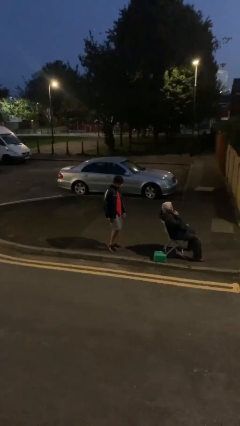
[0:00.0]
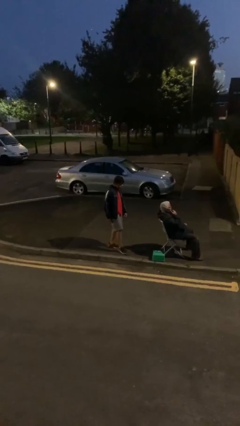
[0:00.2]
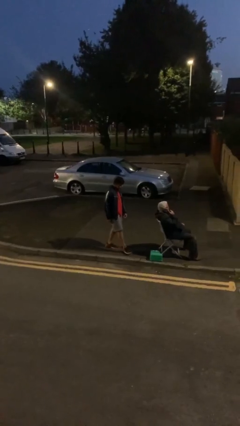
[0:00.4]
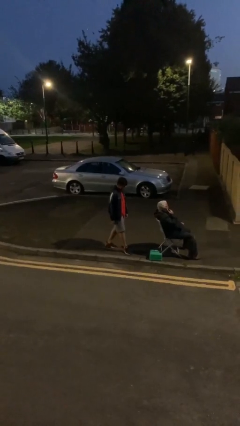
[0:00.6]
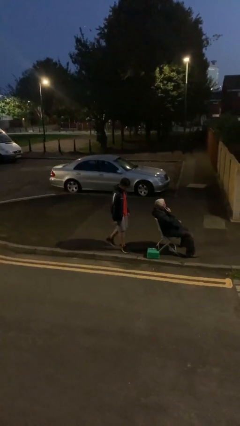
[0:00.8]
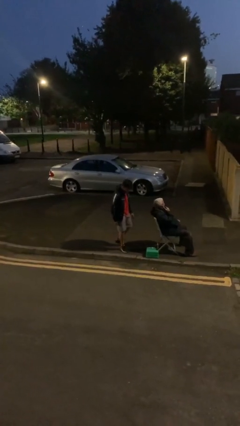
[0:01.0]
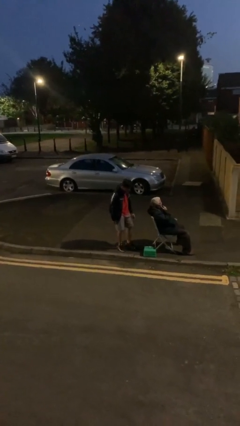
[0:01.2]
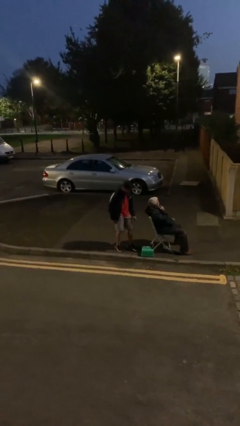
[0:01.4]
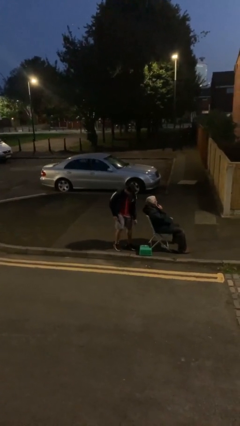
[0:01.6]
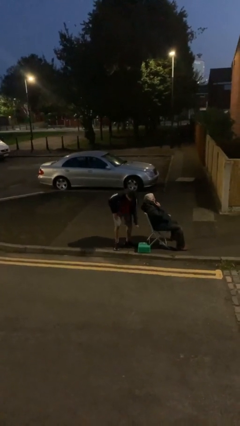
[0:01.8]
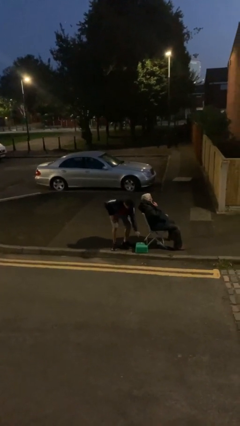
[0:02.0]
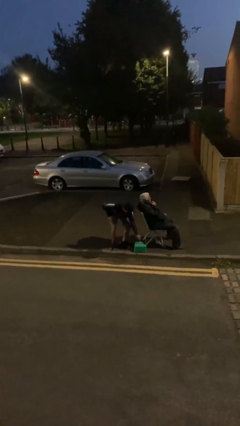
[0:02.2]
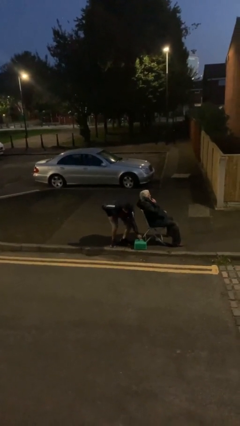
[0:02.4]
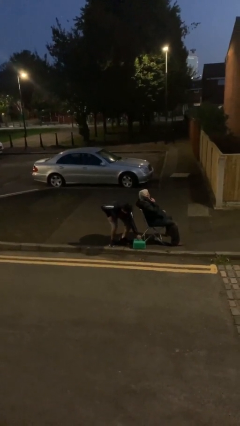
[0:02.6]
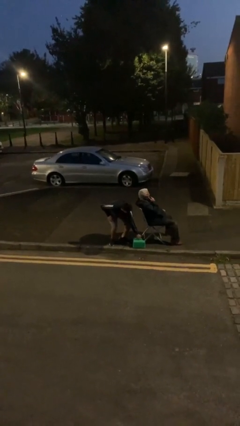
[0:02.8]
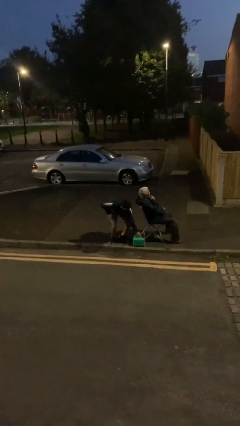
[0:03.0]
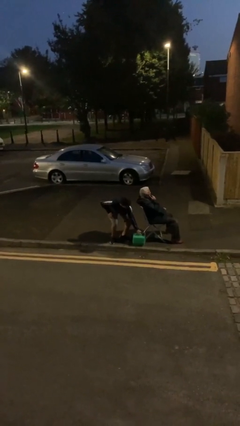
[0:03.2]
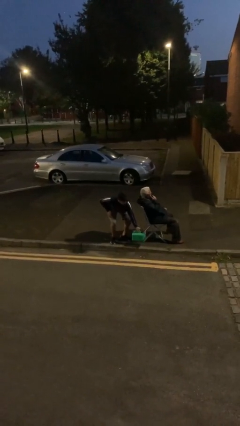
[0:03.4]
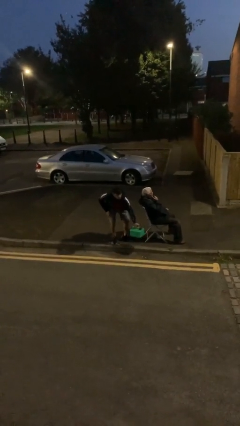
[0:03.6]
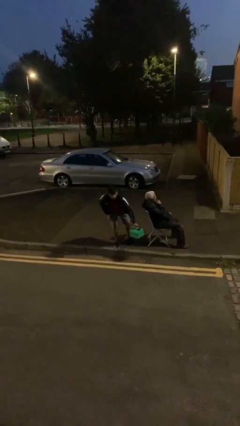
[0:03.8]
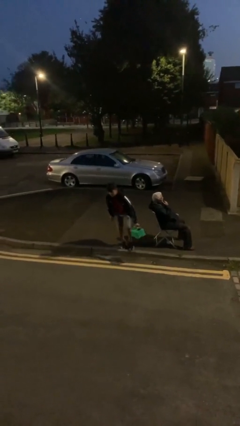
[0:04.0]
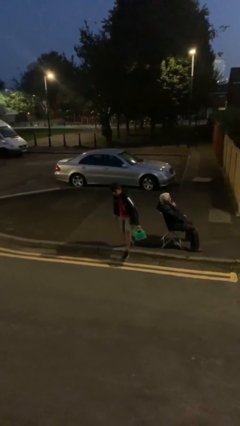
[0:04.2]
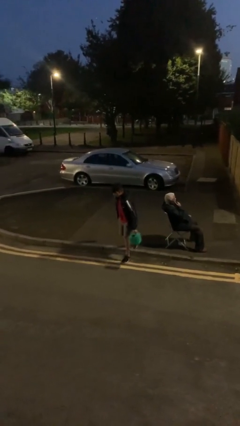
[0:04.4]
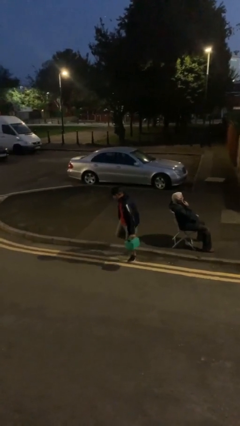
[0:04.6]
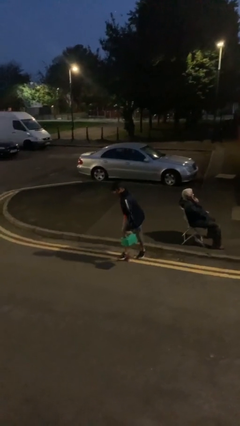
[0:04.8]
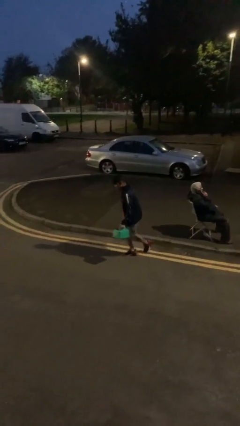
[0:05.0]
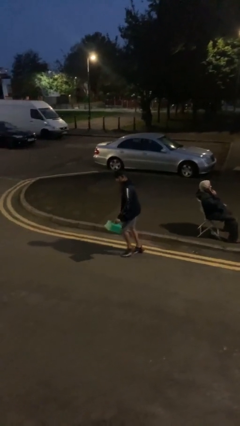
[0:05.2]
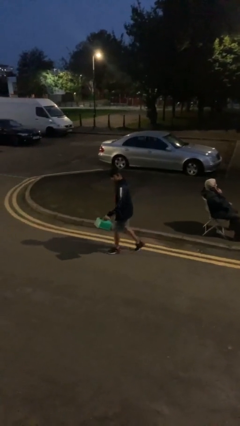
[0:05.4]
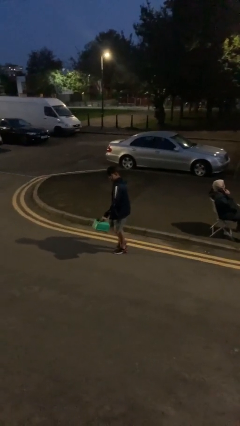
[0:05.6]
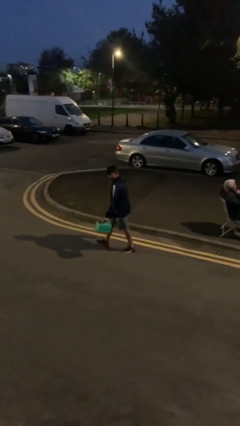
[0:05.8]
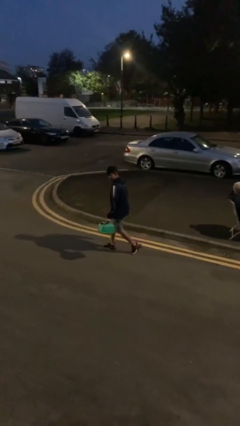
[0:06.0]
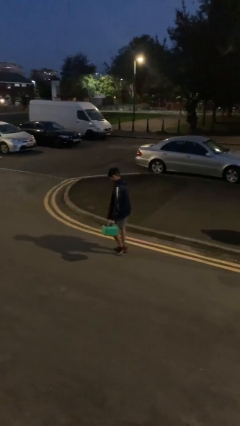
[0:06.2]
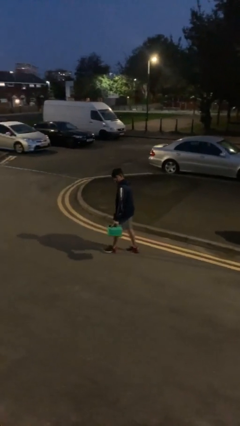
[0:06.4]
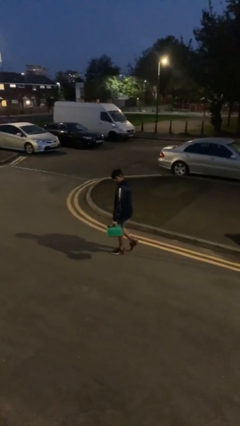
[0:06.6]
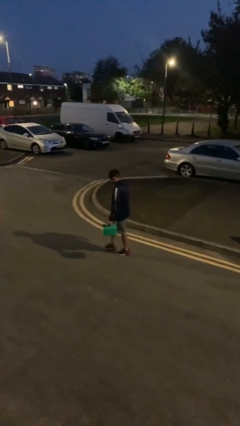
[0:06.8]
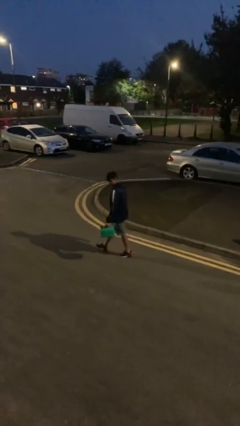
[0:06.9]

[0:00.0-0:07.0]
person steals object from person

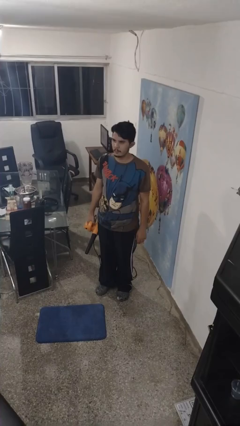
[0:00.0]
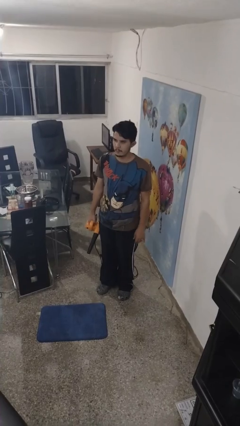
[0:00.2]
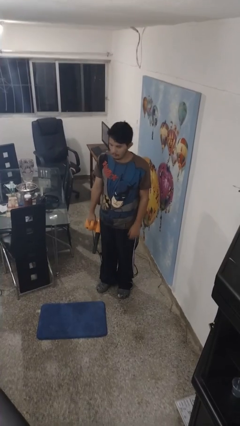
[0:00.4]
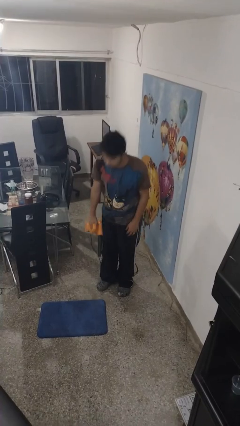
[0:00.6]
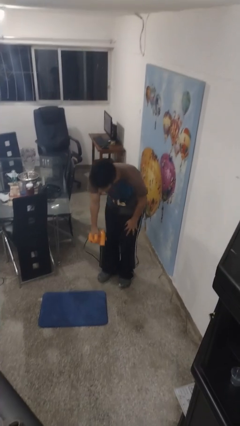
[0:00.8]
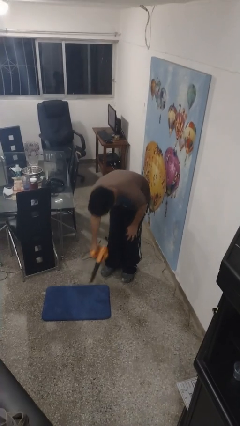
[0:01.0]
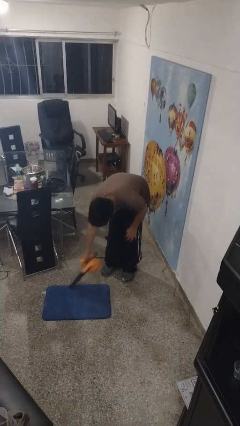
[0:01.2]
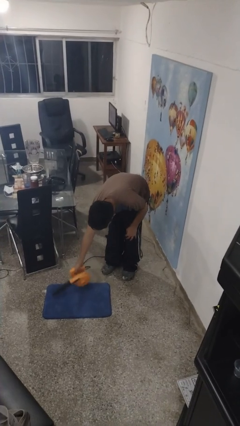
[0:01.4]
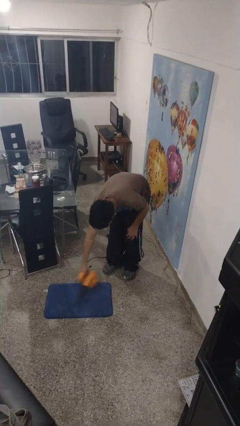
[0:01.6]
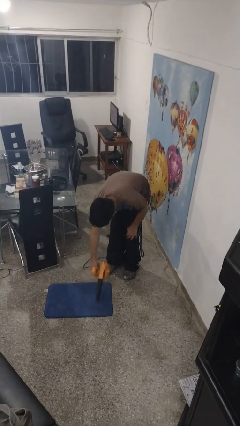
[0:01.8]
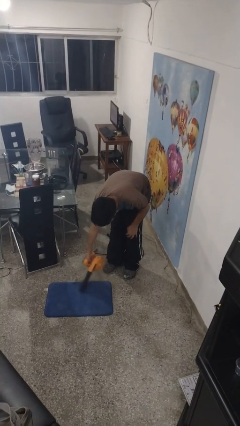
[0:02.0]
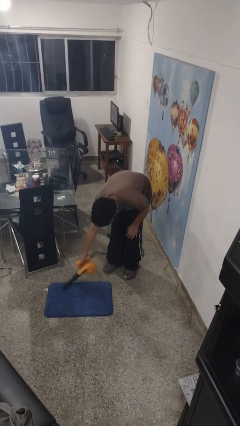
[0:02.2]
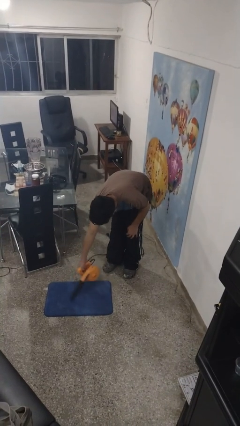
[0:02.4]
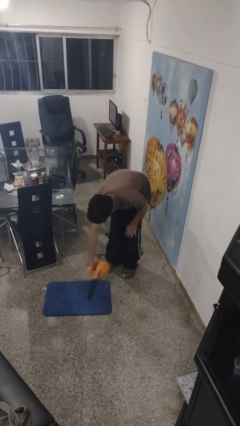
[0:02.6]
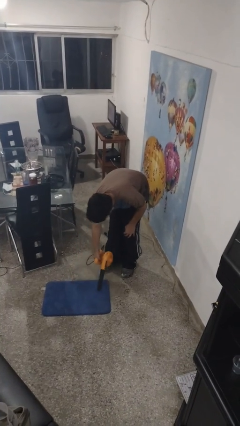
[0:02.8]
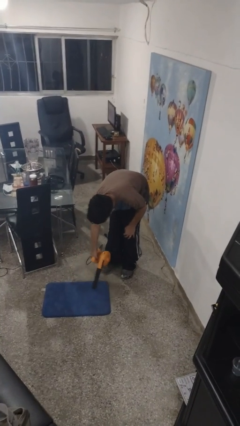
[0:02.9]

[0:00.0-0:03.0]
person vacuums carpet

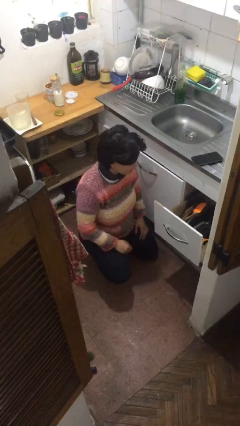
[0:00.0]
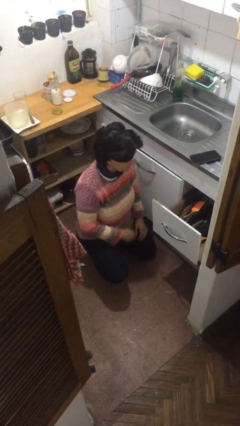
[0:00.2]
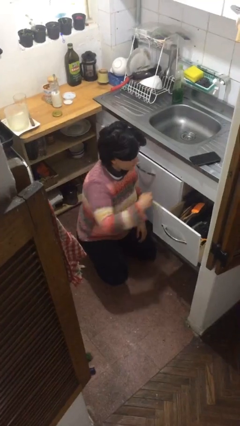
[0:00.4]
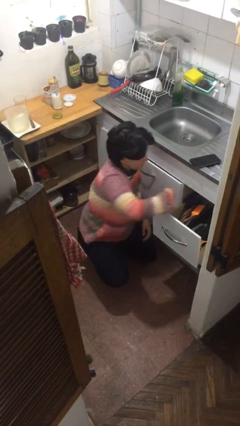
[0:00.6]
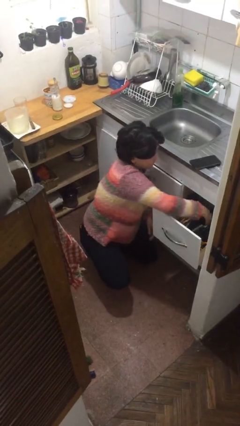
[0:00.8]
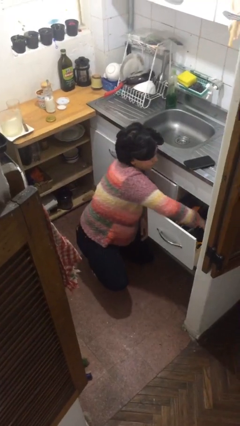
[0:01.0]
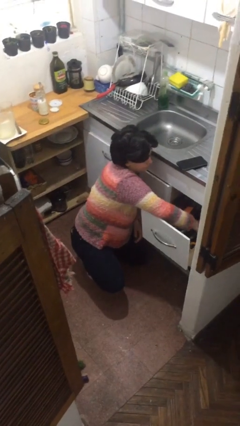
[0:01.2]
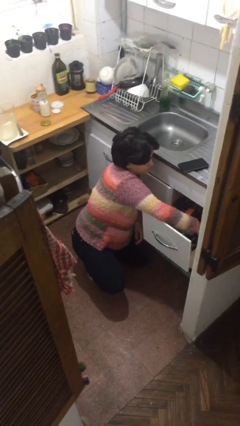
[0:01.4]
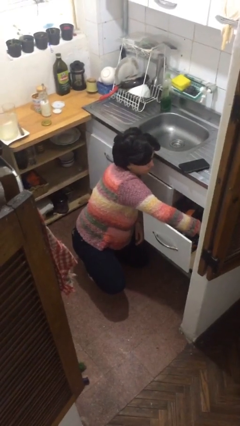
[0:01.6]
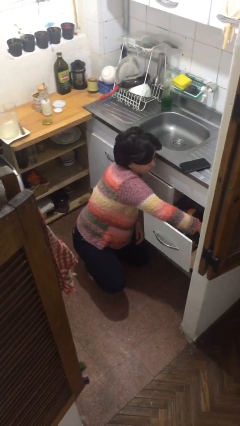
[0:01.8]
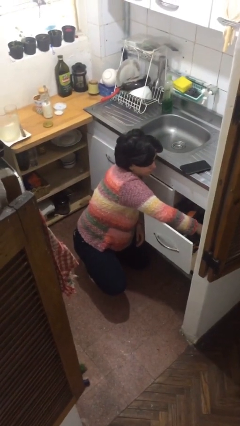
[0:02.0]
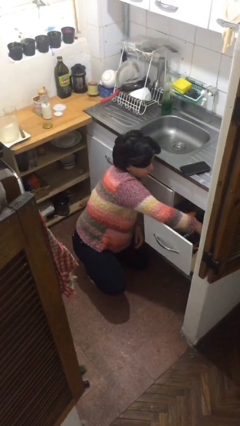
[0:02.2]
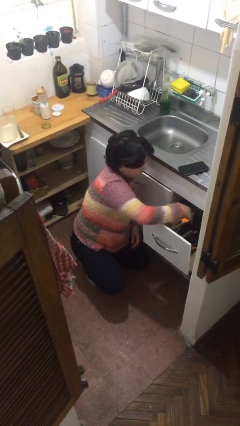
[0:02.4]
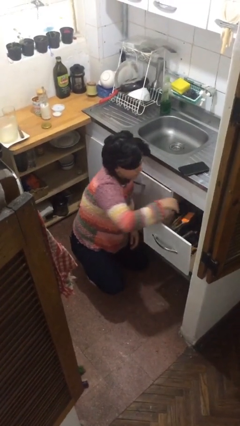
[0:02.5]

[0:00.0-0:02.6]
person searches in kitchen drawer

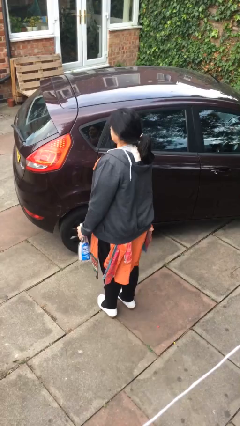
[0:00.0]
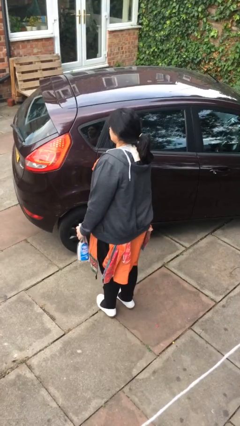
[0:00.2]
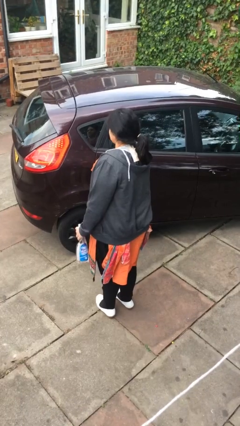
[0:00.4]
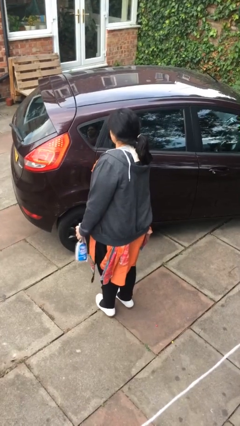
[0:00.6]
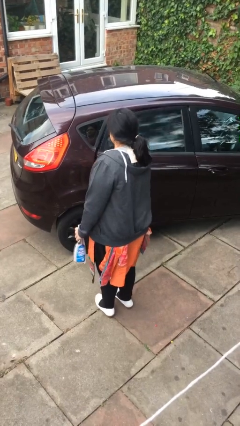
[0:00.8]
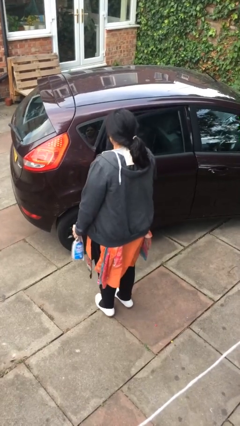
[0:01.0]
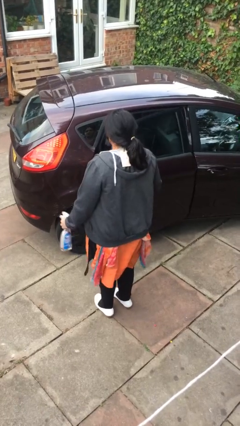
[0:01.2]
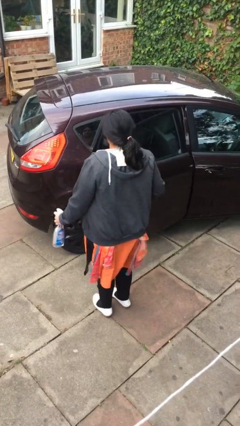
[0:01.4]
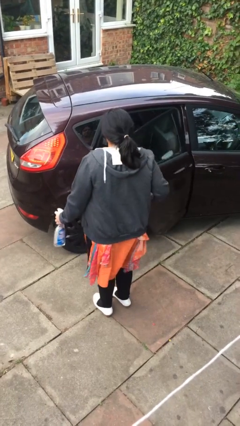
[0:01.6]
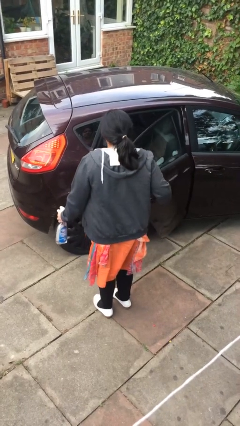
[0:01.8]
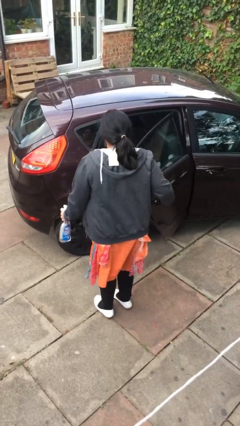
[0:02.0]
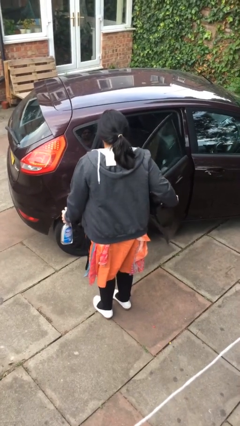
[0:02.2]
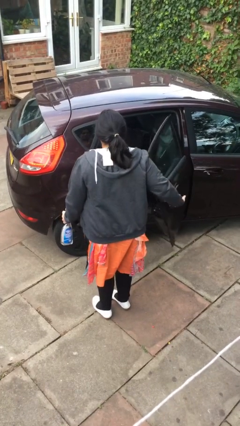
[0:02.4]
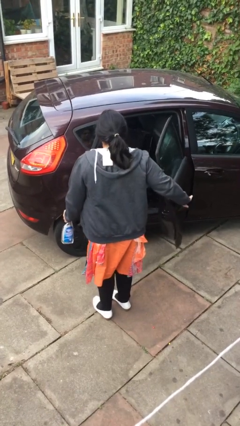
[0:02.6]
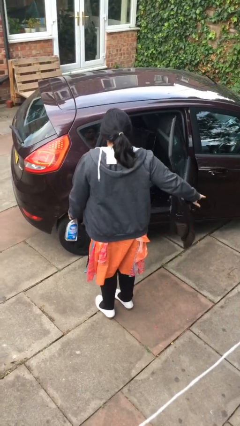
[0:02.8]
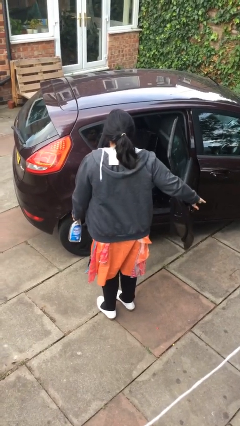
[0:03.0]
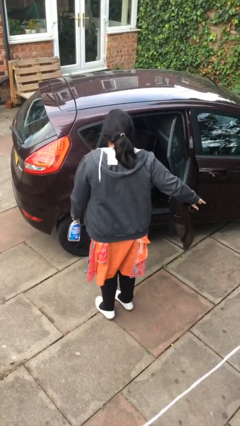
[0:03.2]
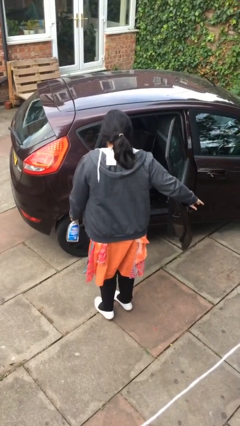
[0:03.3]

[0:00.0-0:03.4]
person opens car door

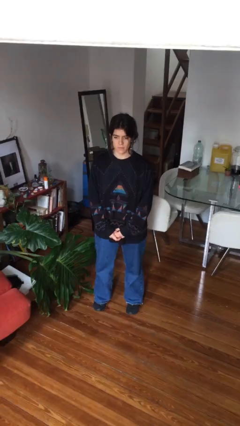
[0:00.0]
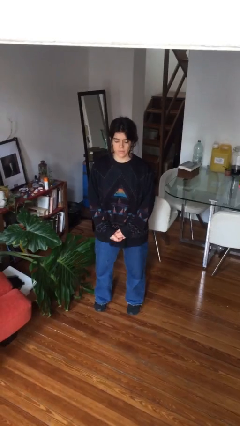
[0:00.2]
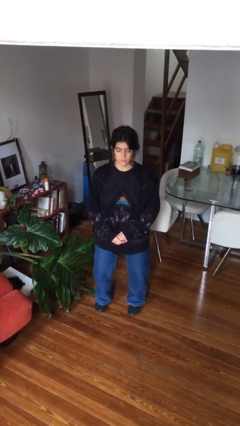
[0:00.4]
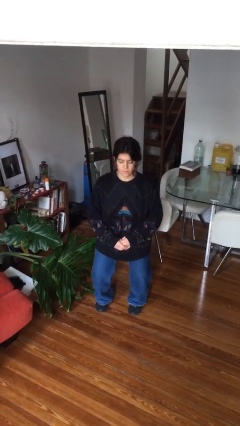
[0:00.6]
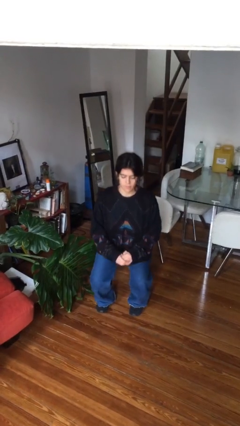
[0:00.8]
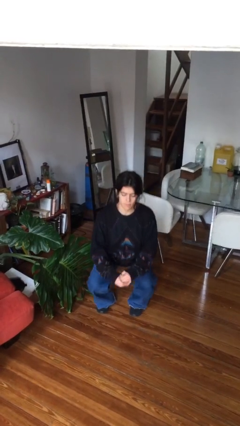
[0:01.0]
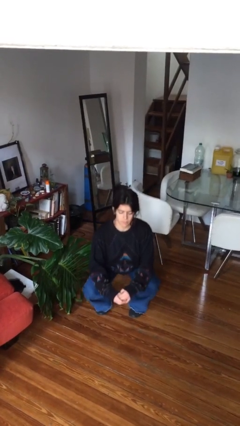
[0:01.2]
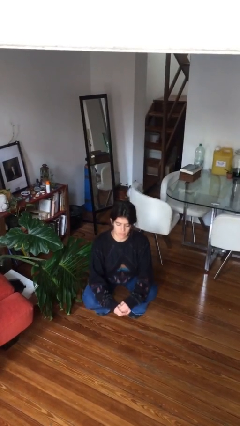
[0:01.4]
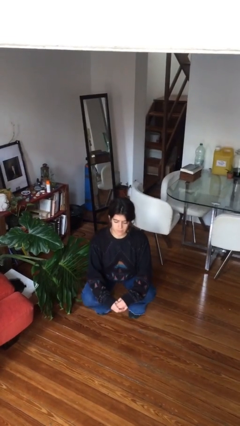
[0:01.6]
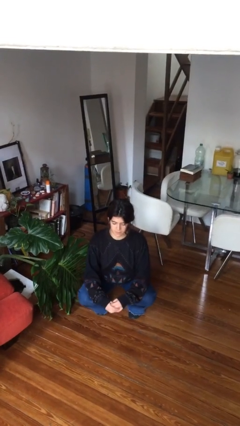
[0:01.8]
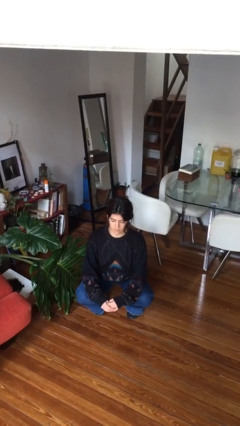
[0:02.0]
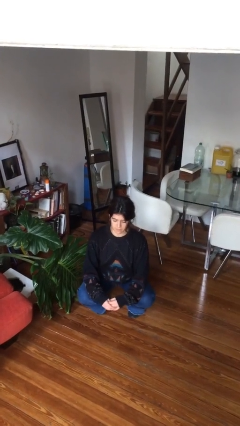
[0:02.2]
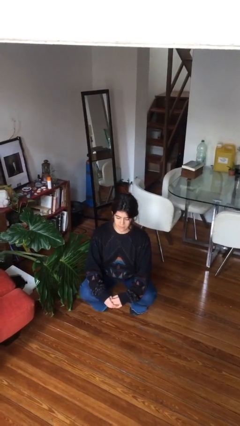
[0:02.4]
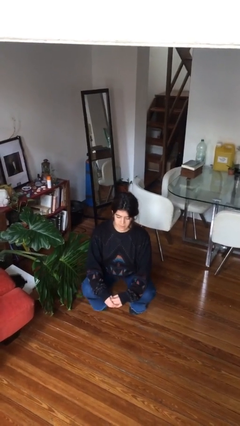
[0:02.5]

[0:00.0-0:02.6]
person squats
